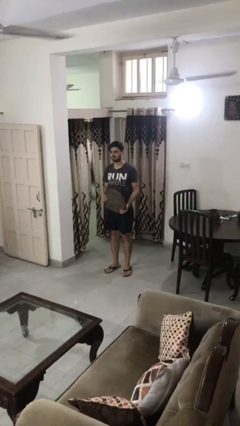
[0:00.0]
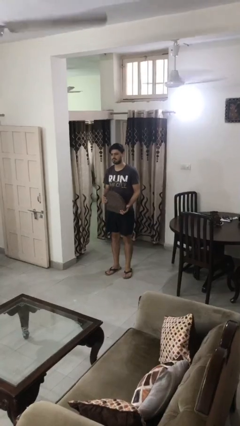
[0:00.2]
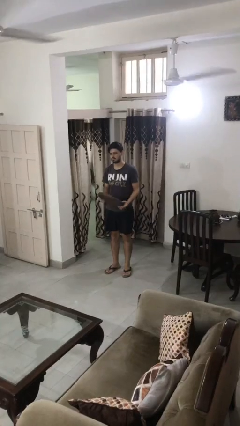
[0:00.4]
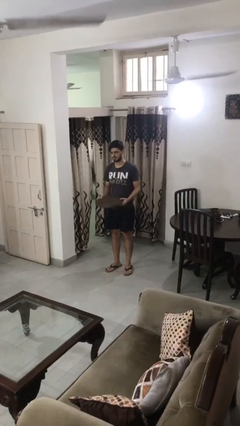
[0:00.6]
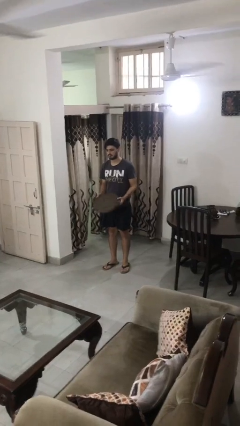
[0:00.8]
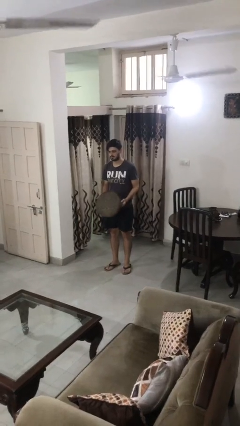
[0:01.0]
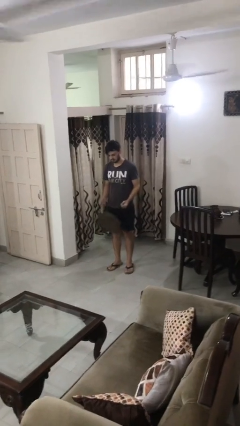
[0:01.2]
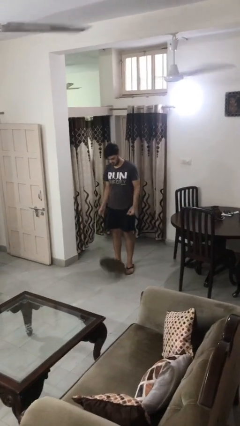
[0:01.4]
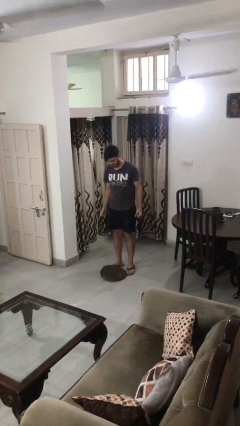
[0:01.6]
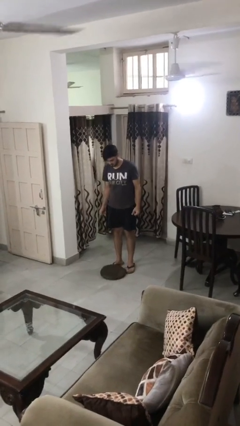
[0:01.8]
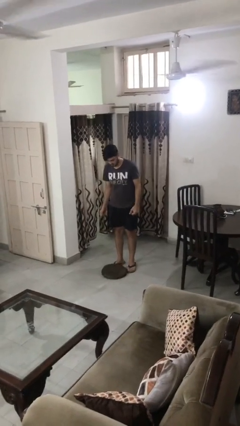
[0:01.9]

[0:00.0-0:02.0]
person drops object

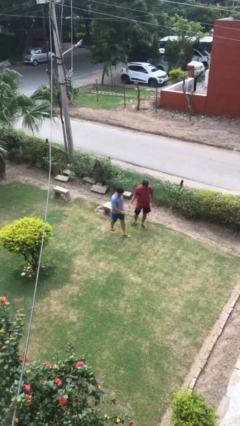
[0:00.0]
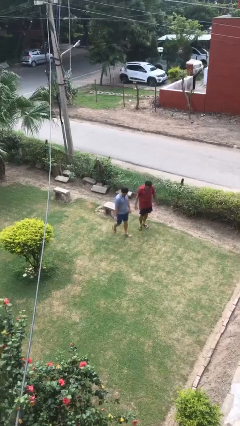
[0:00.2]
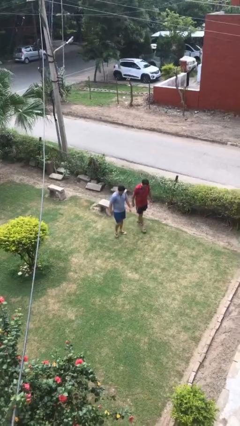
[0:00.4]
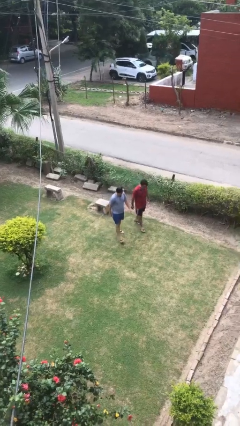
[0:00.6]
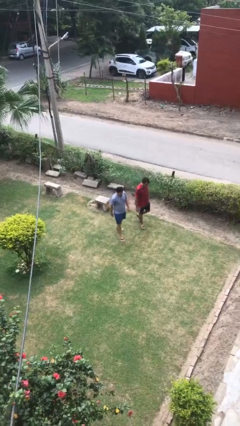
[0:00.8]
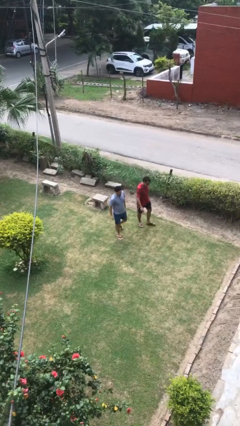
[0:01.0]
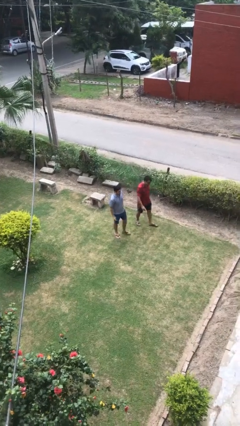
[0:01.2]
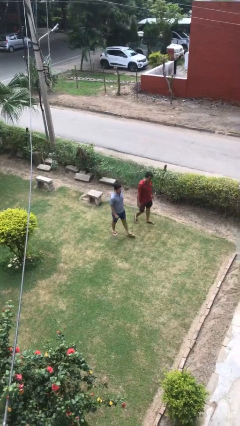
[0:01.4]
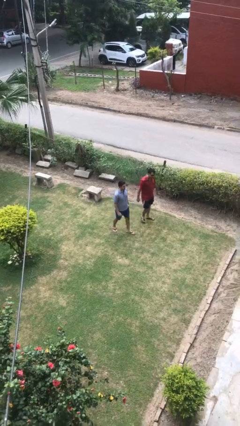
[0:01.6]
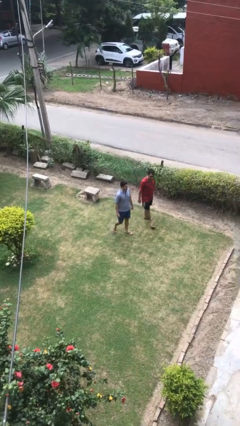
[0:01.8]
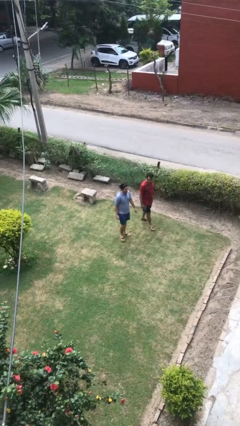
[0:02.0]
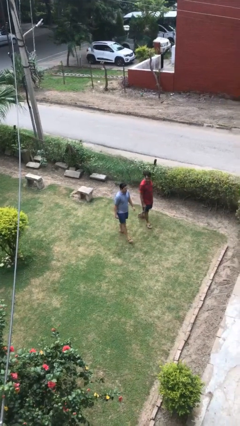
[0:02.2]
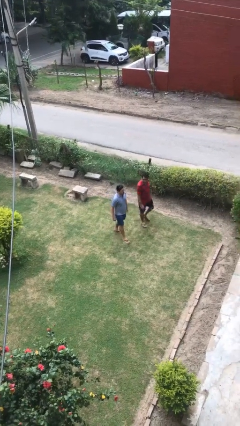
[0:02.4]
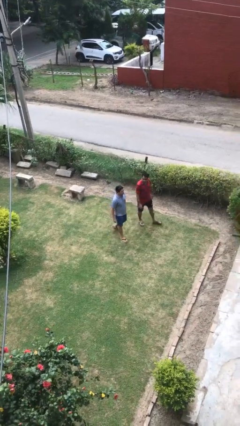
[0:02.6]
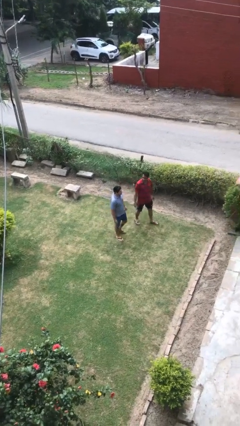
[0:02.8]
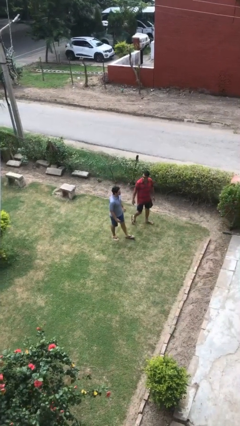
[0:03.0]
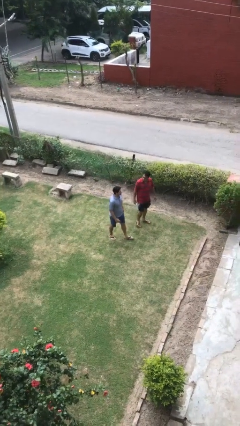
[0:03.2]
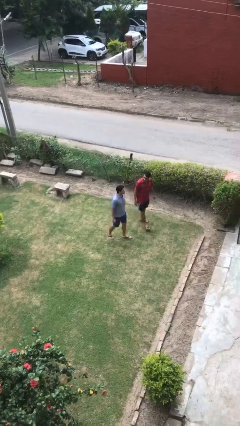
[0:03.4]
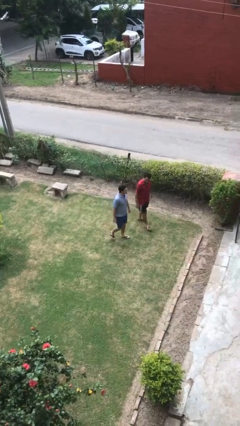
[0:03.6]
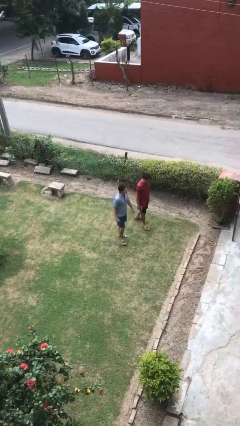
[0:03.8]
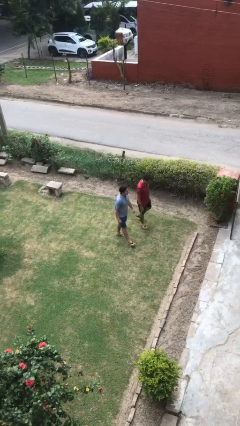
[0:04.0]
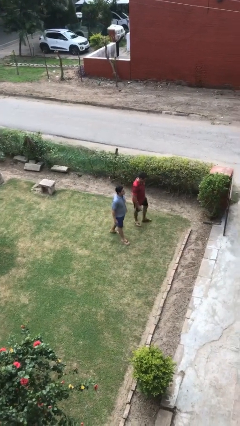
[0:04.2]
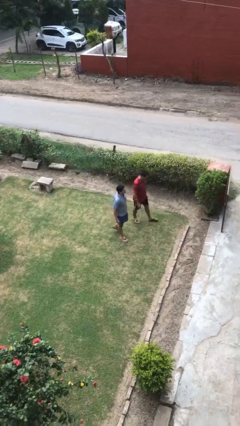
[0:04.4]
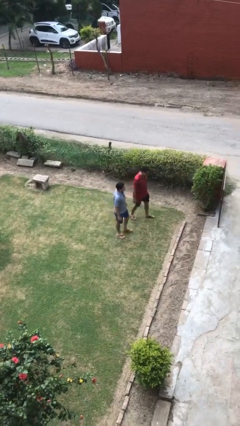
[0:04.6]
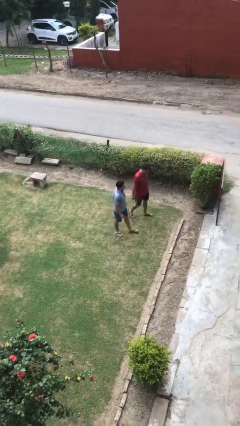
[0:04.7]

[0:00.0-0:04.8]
person talks to person

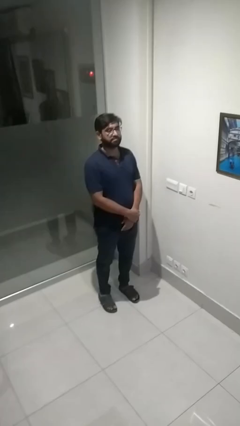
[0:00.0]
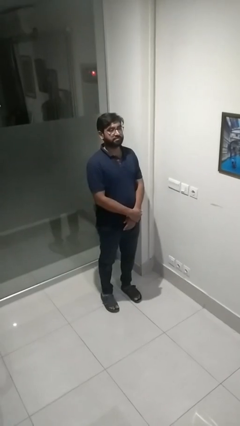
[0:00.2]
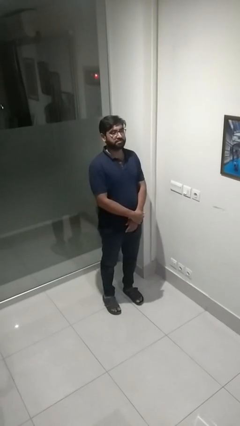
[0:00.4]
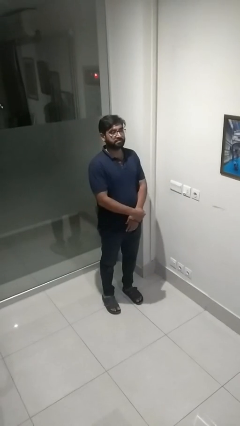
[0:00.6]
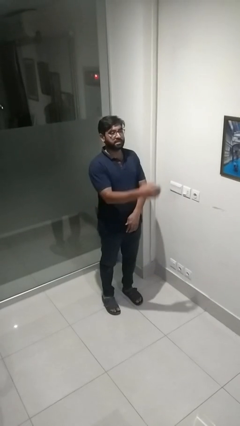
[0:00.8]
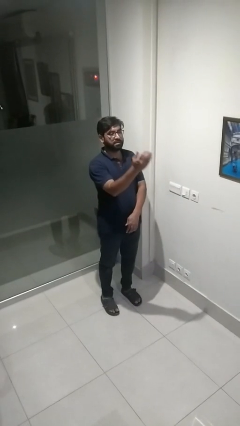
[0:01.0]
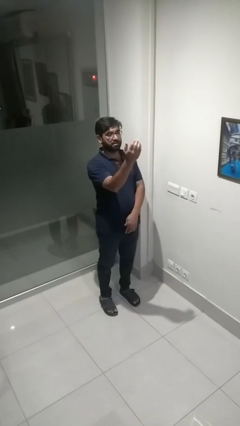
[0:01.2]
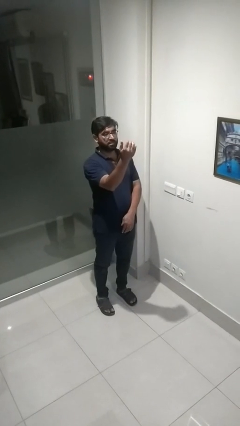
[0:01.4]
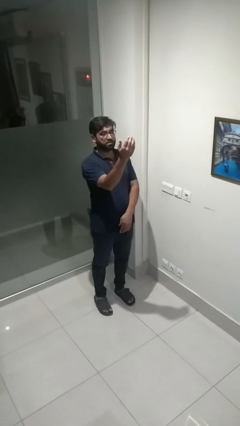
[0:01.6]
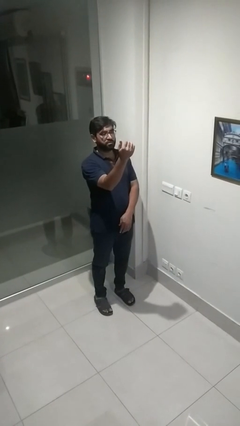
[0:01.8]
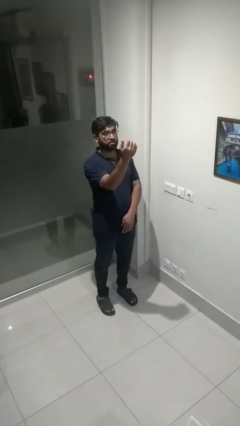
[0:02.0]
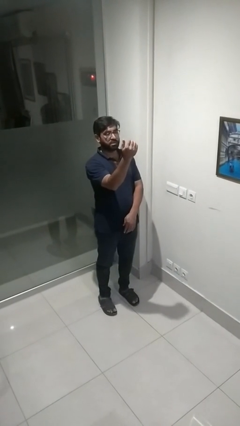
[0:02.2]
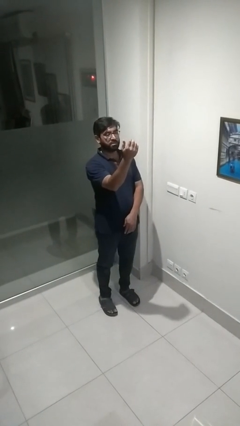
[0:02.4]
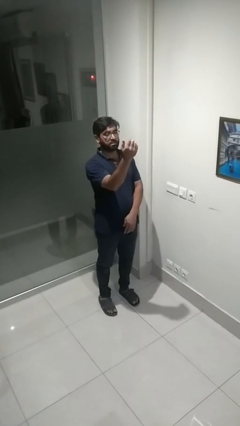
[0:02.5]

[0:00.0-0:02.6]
person gestures come here

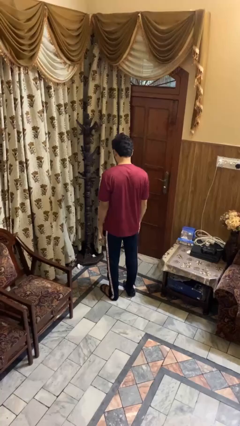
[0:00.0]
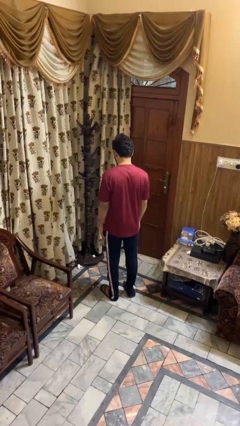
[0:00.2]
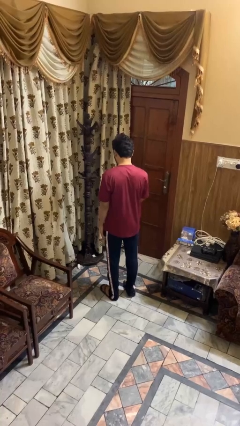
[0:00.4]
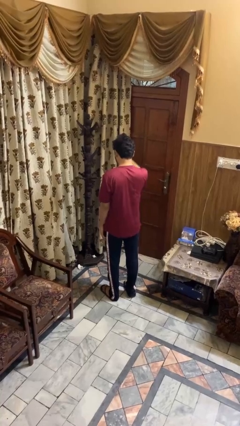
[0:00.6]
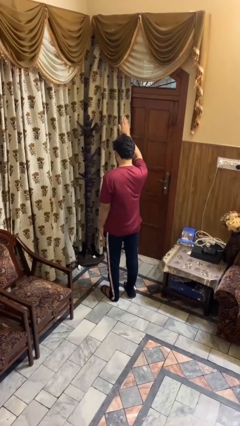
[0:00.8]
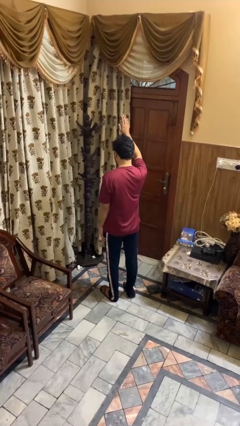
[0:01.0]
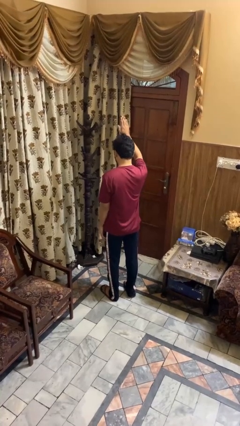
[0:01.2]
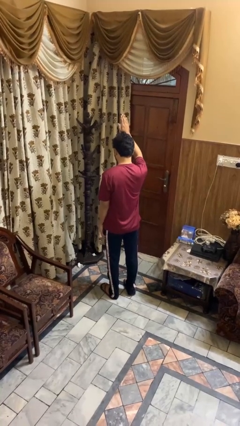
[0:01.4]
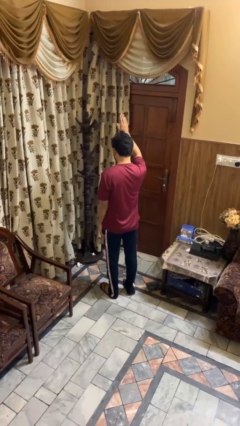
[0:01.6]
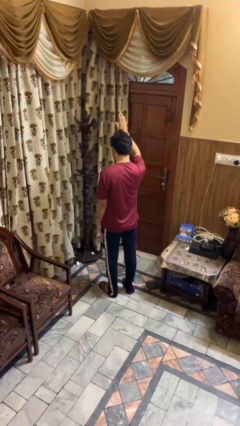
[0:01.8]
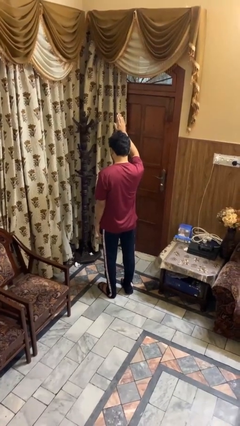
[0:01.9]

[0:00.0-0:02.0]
person gestures raise hand

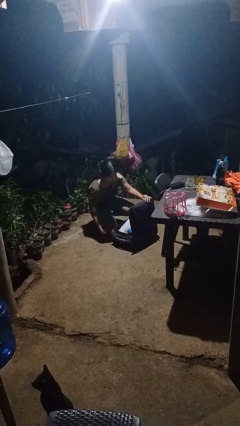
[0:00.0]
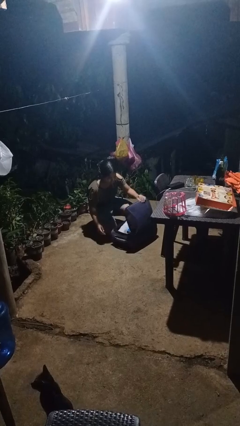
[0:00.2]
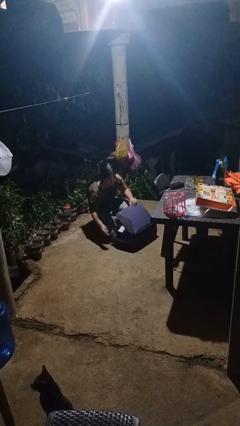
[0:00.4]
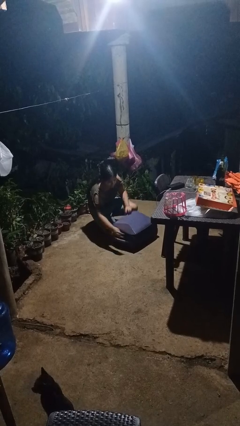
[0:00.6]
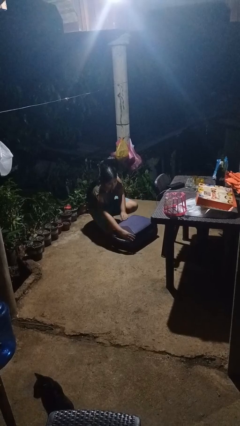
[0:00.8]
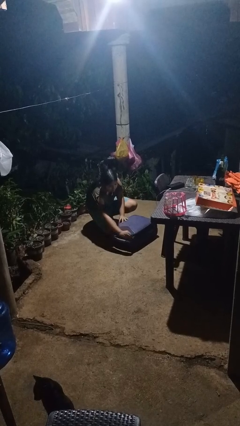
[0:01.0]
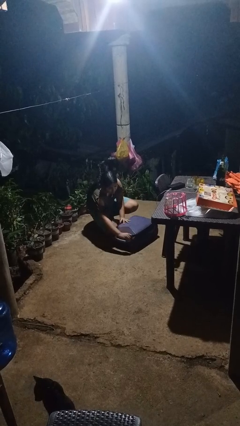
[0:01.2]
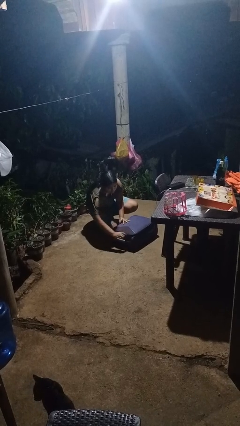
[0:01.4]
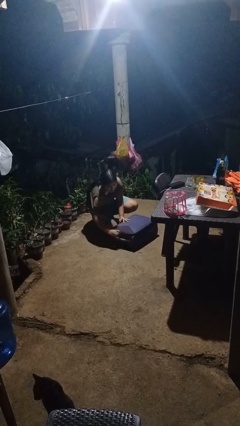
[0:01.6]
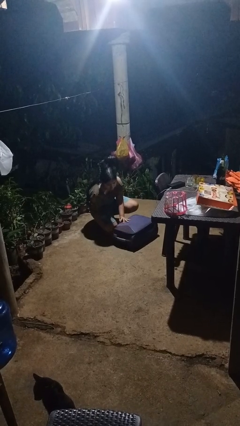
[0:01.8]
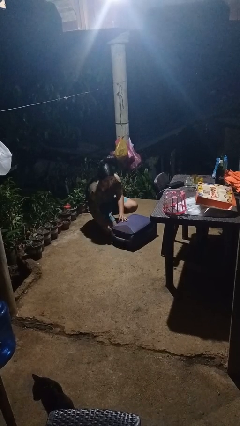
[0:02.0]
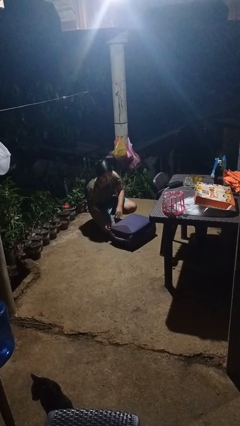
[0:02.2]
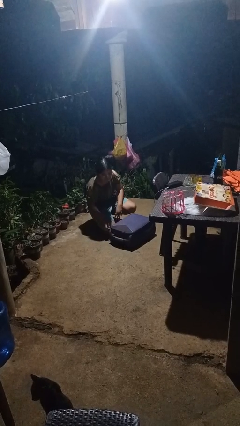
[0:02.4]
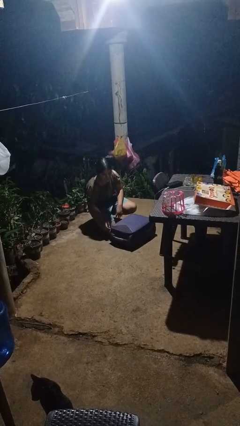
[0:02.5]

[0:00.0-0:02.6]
person closes suitcase

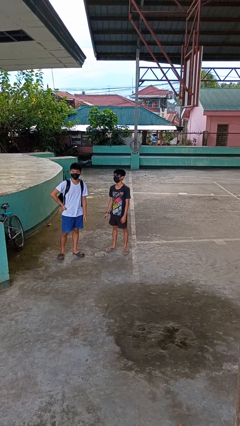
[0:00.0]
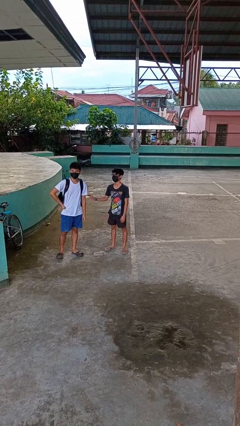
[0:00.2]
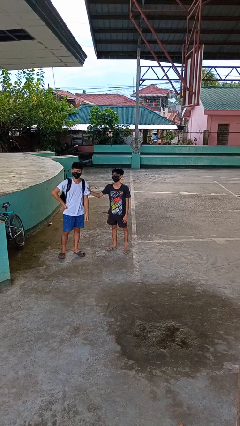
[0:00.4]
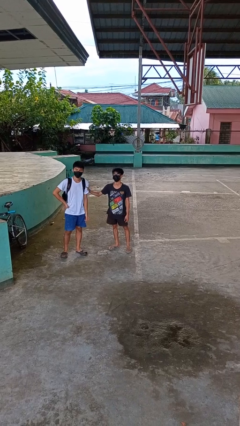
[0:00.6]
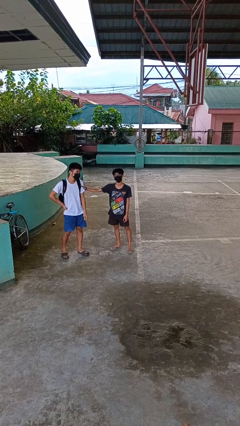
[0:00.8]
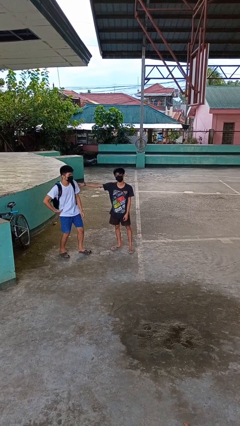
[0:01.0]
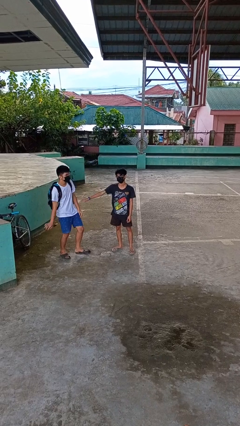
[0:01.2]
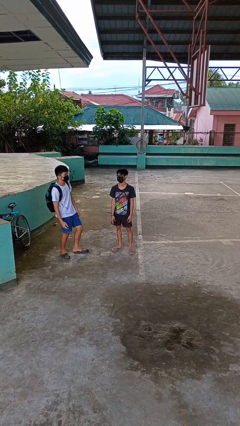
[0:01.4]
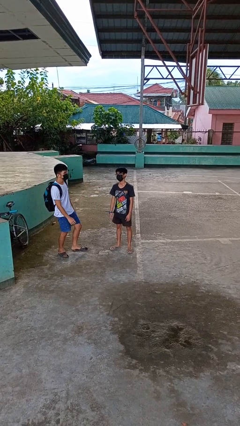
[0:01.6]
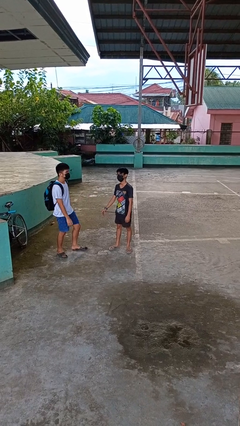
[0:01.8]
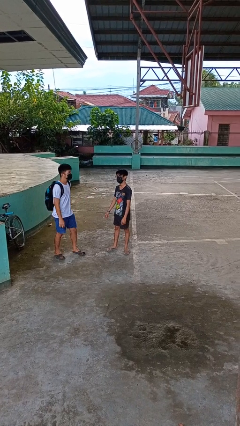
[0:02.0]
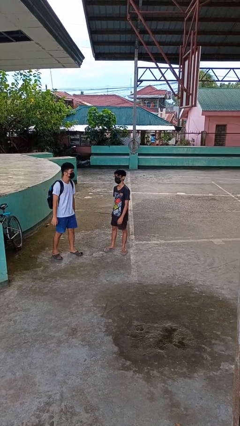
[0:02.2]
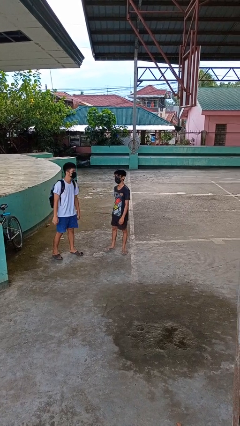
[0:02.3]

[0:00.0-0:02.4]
person shoves person

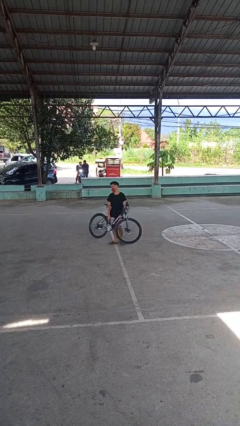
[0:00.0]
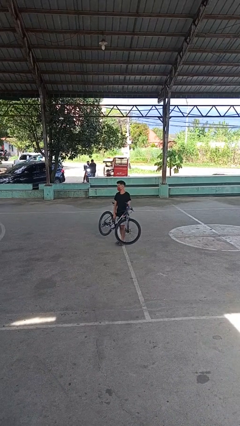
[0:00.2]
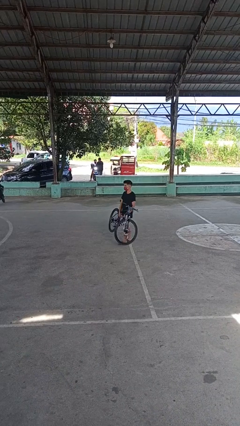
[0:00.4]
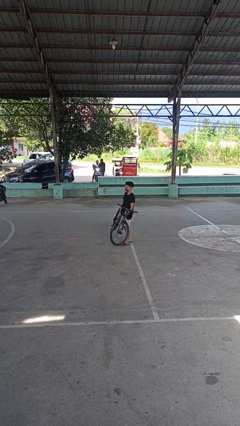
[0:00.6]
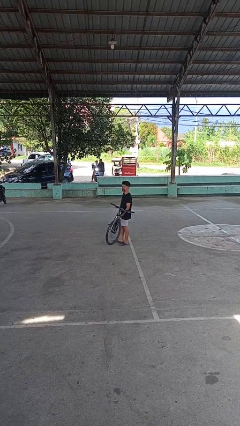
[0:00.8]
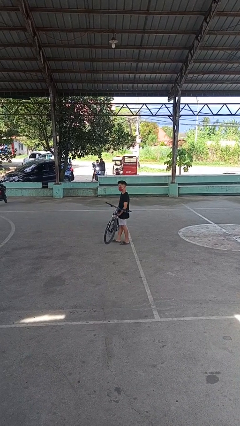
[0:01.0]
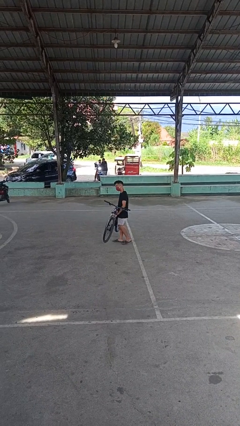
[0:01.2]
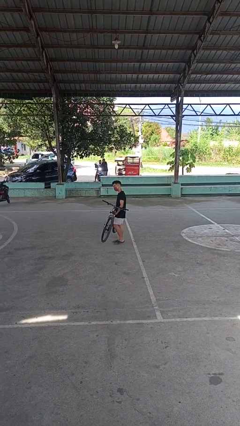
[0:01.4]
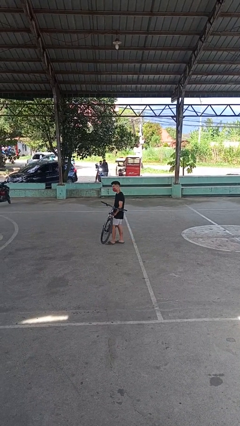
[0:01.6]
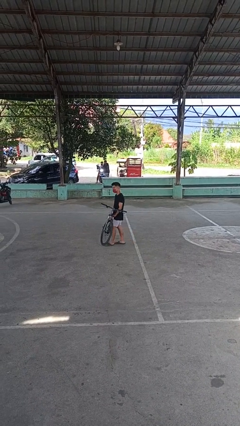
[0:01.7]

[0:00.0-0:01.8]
person carries bicycle
